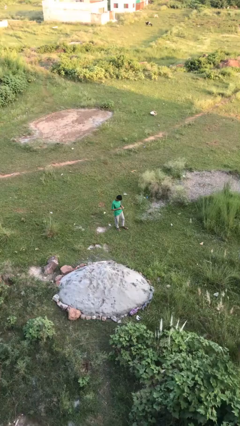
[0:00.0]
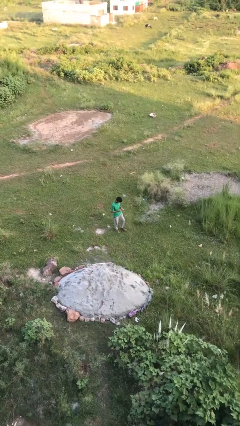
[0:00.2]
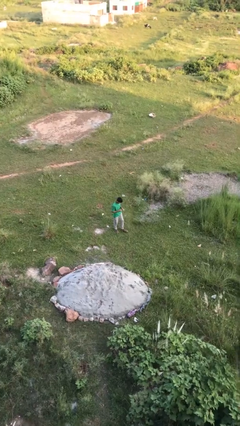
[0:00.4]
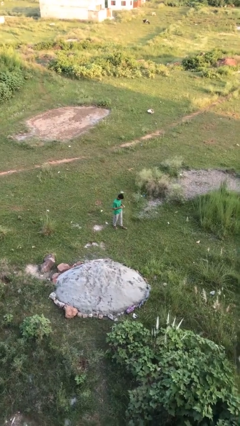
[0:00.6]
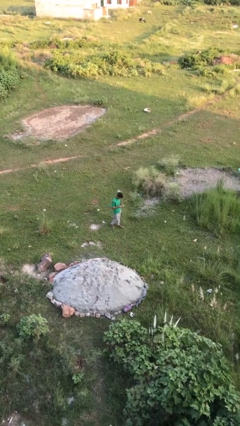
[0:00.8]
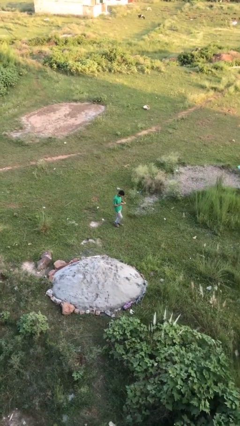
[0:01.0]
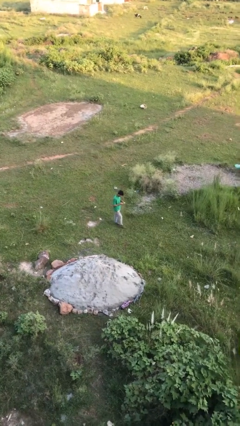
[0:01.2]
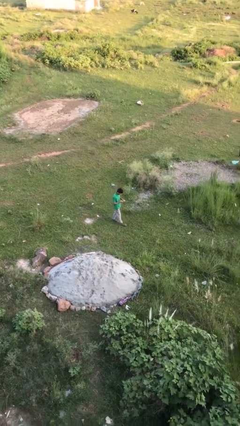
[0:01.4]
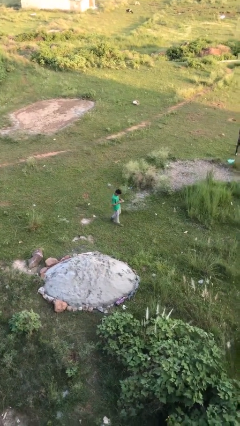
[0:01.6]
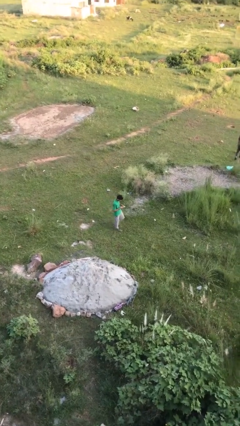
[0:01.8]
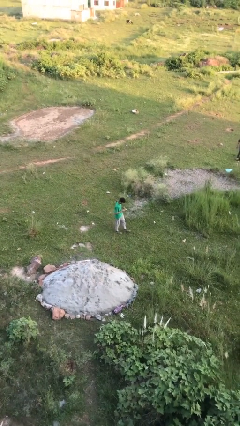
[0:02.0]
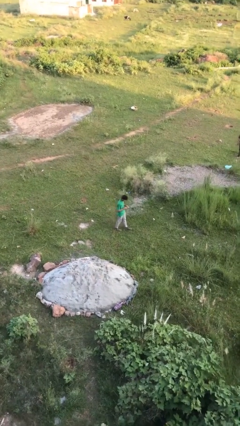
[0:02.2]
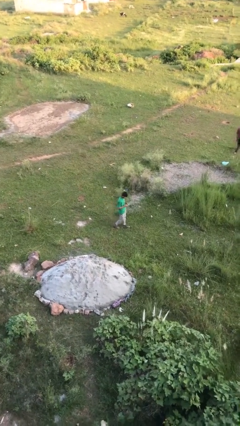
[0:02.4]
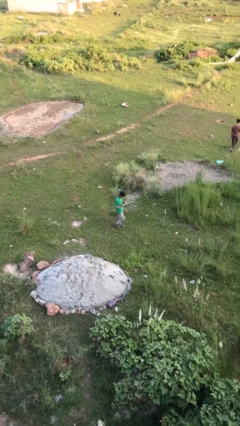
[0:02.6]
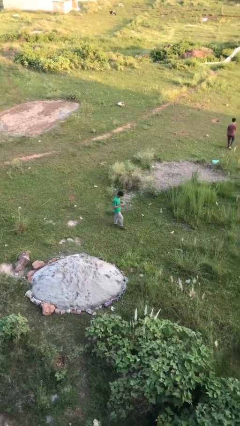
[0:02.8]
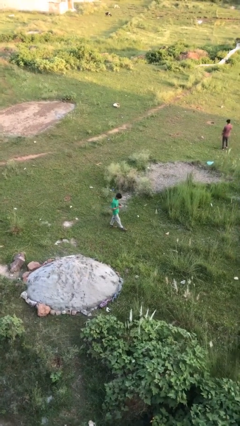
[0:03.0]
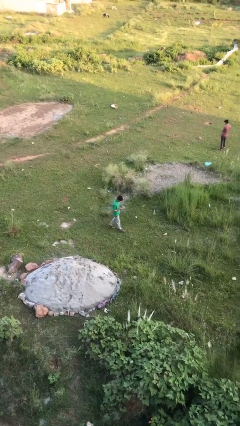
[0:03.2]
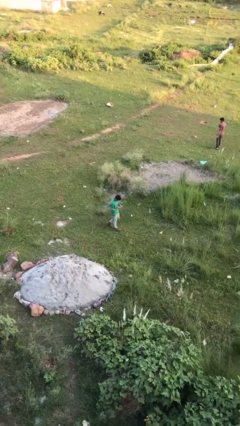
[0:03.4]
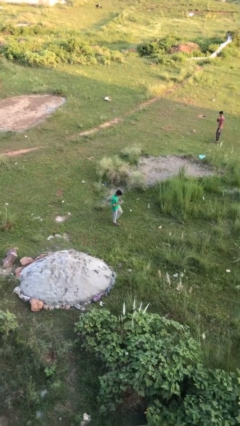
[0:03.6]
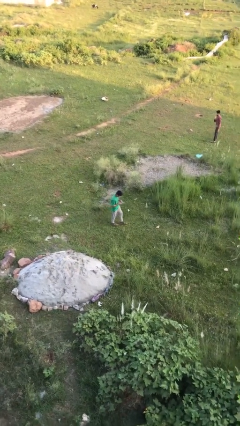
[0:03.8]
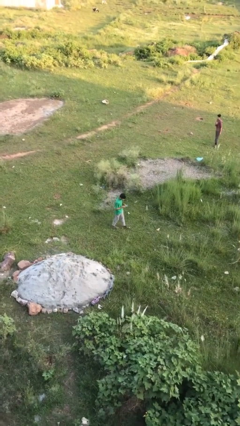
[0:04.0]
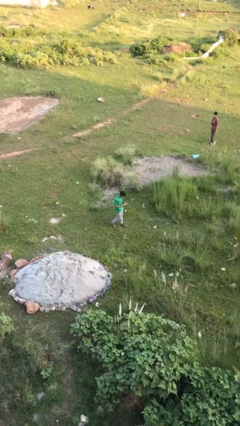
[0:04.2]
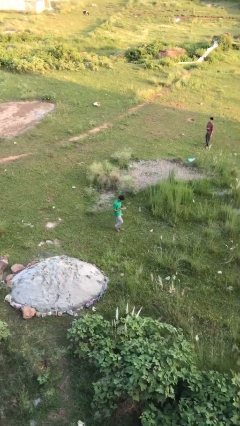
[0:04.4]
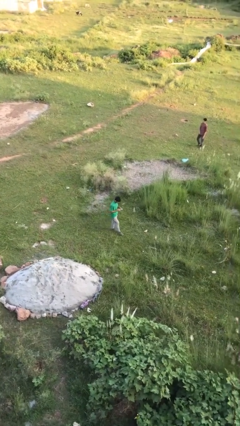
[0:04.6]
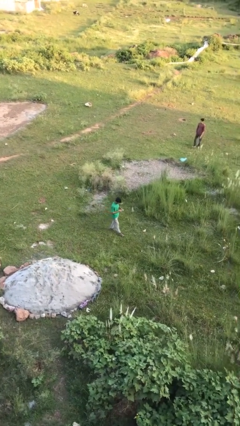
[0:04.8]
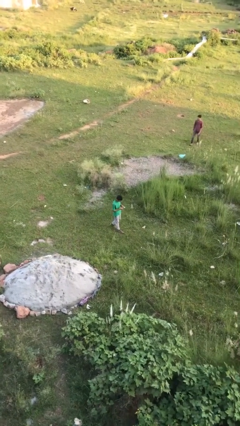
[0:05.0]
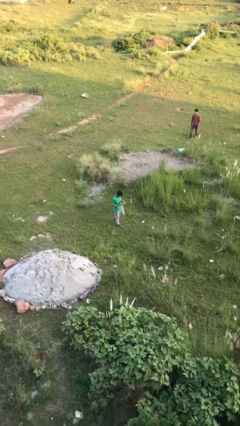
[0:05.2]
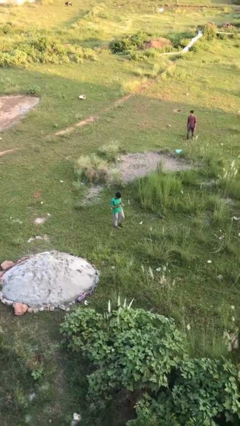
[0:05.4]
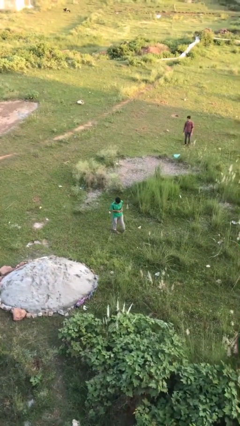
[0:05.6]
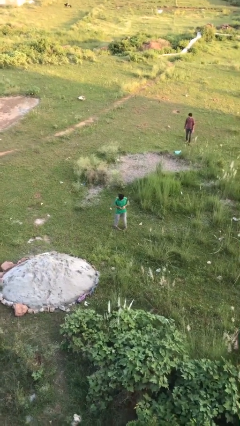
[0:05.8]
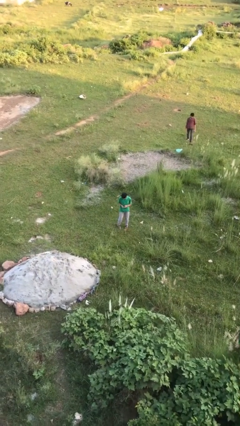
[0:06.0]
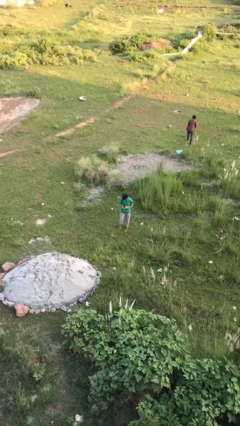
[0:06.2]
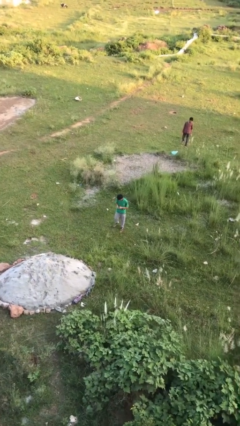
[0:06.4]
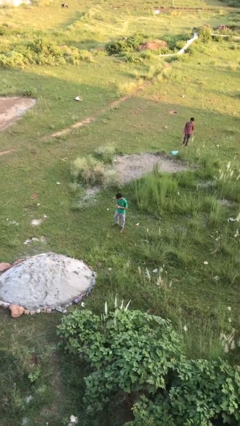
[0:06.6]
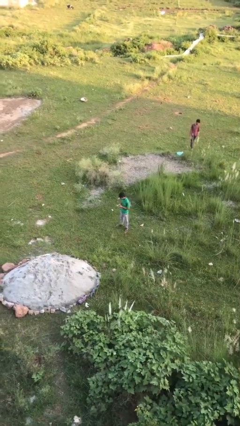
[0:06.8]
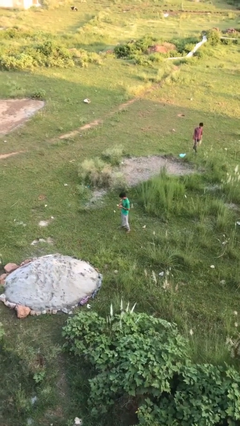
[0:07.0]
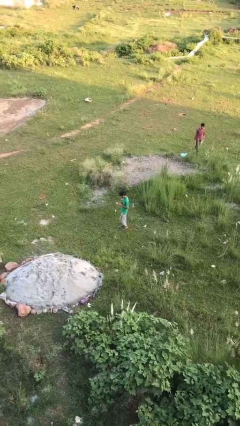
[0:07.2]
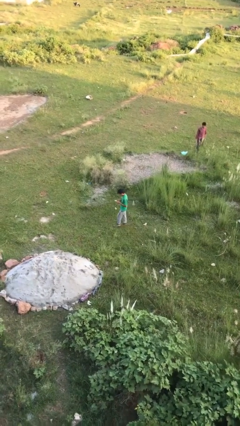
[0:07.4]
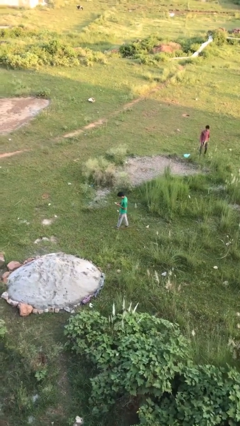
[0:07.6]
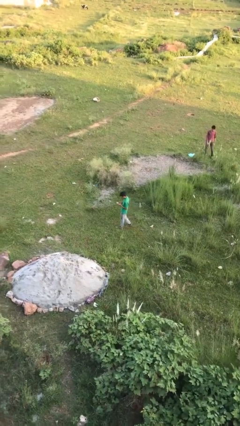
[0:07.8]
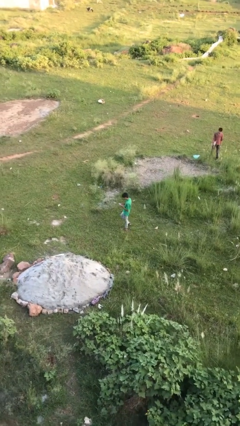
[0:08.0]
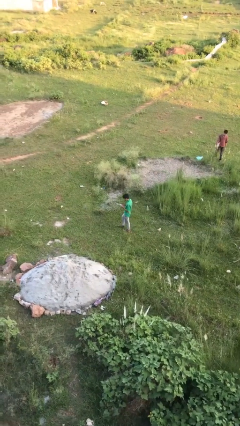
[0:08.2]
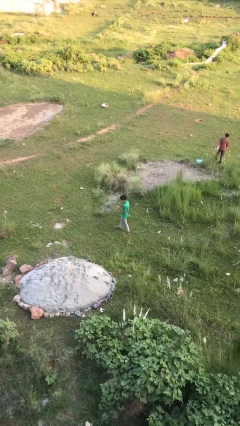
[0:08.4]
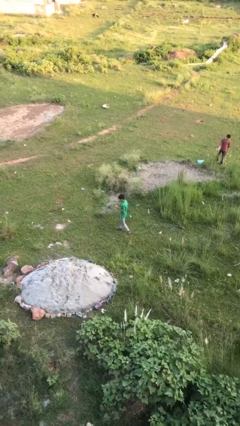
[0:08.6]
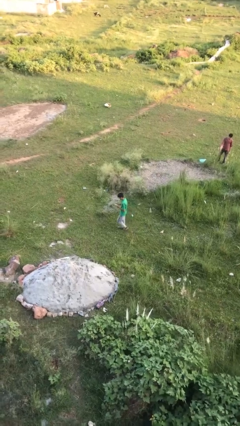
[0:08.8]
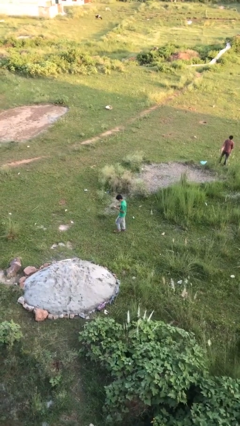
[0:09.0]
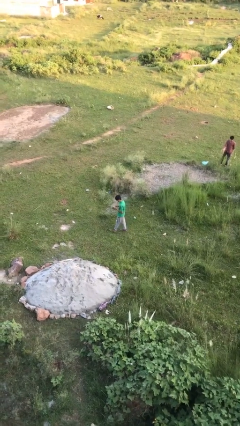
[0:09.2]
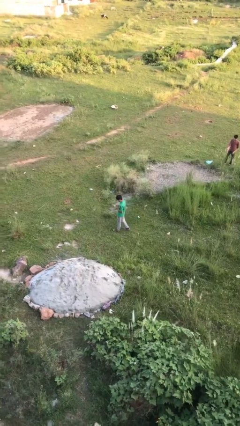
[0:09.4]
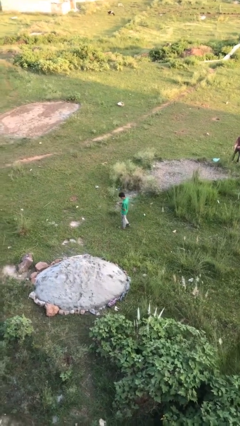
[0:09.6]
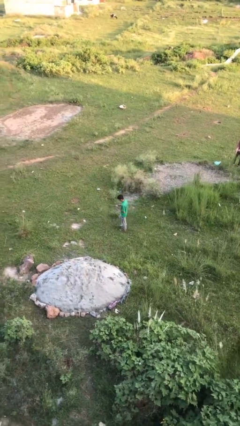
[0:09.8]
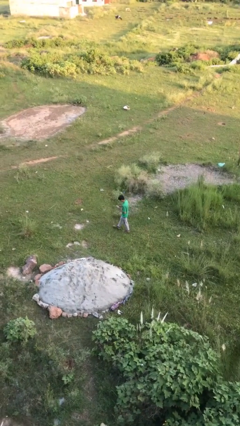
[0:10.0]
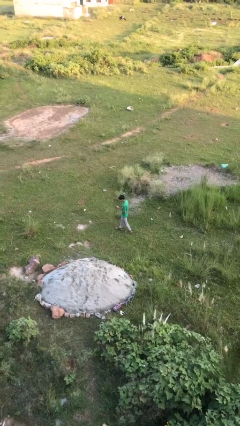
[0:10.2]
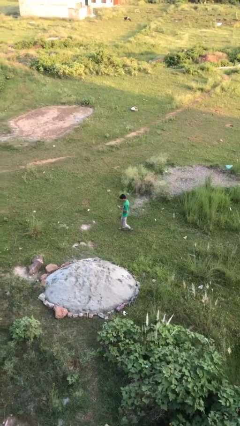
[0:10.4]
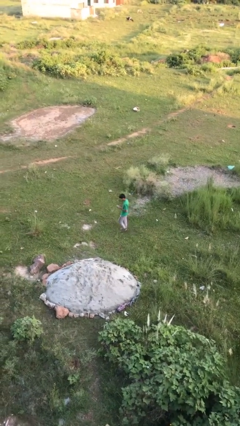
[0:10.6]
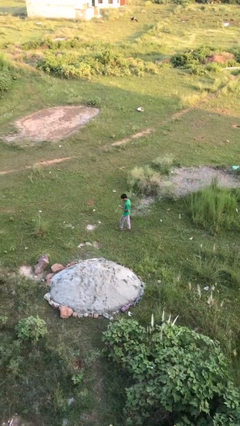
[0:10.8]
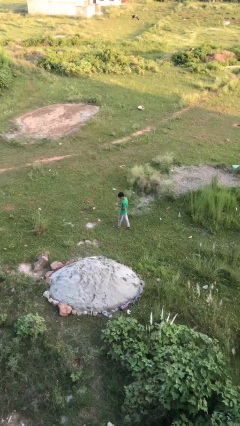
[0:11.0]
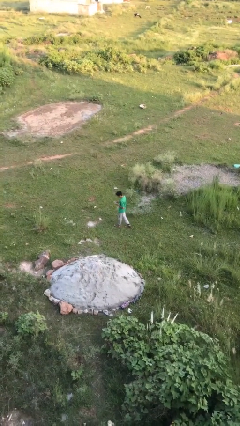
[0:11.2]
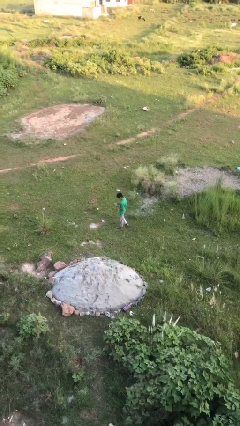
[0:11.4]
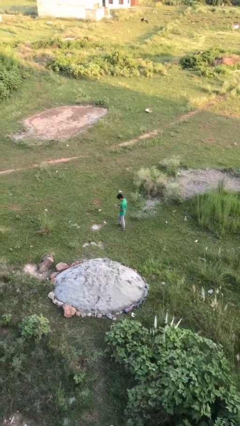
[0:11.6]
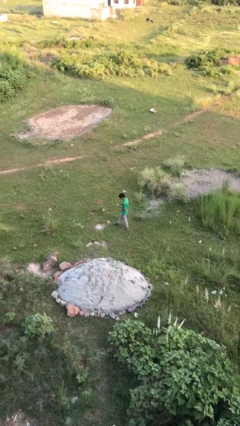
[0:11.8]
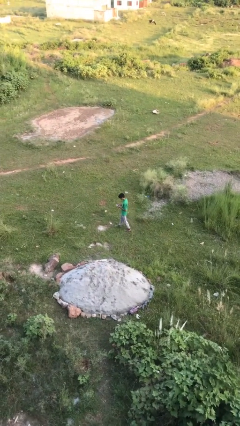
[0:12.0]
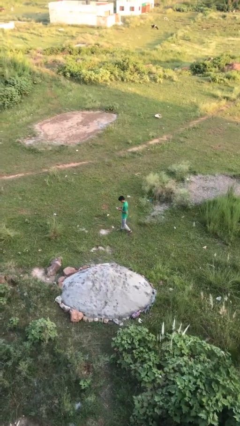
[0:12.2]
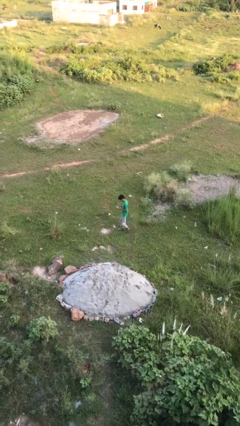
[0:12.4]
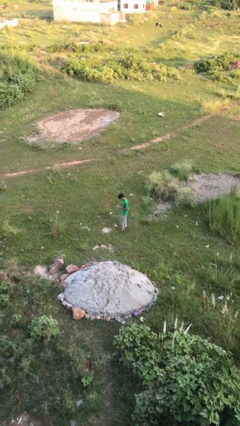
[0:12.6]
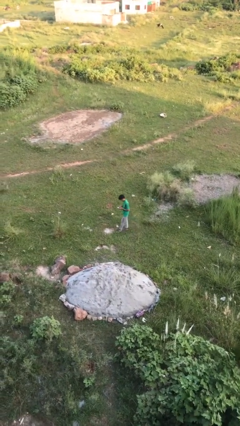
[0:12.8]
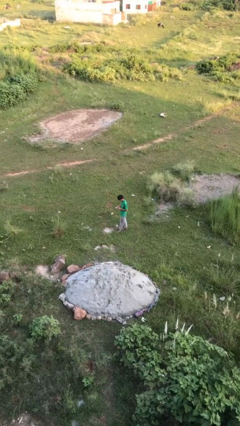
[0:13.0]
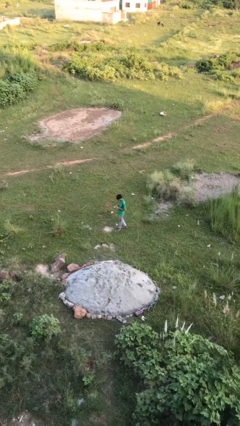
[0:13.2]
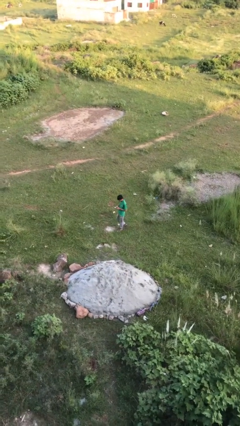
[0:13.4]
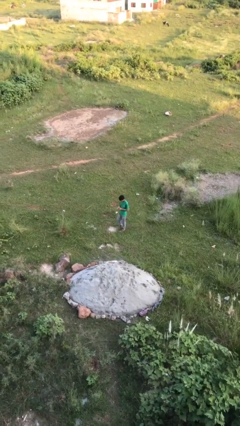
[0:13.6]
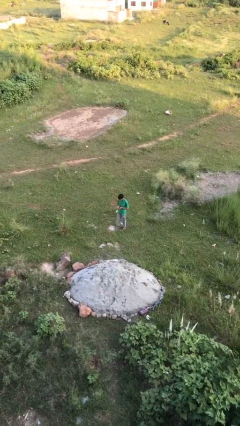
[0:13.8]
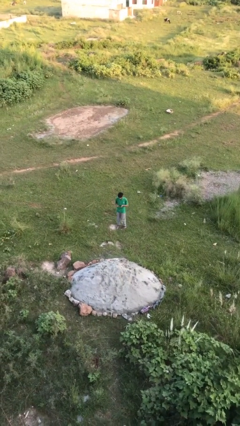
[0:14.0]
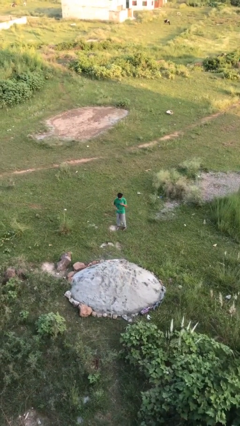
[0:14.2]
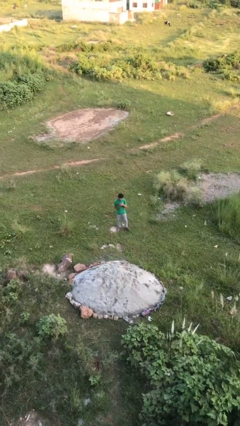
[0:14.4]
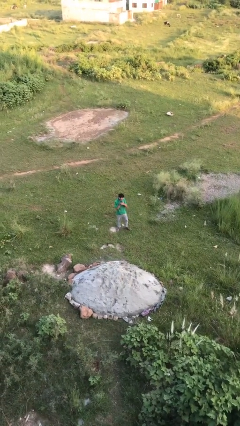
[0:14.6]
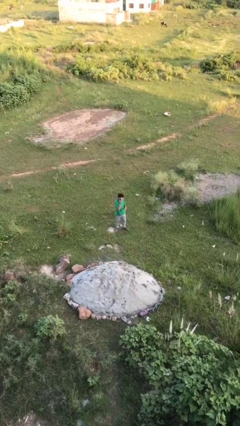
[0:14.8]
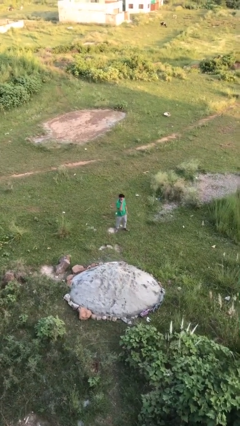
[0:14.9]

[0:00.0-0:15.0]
person texts on phone

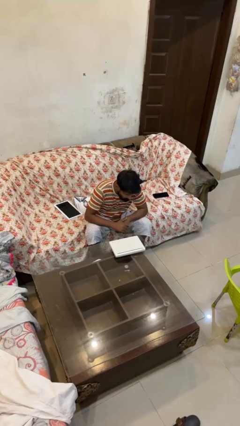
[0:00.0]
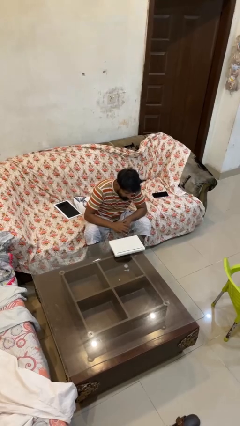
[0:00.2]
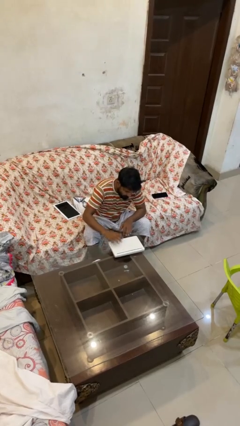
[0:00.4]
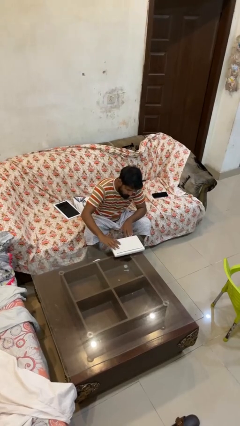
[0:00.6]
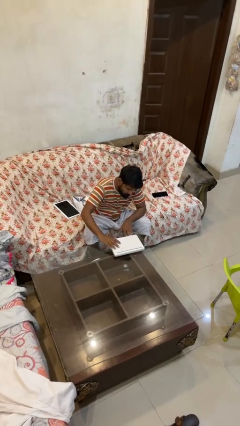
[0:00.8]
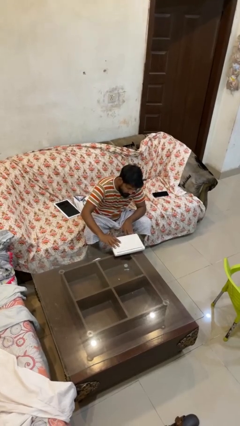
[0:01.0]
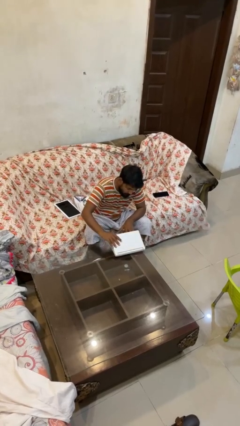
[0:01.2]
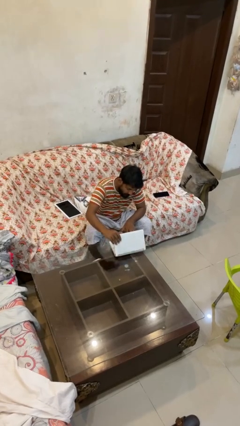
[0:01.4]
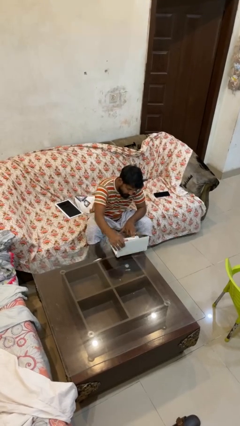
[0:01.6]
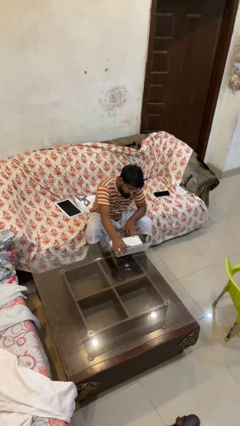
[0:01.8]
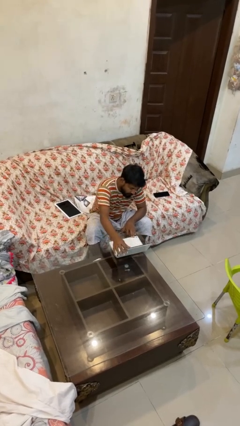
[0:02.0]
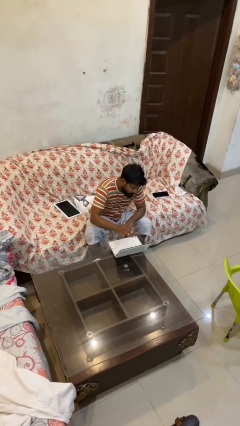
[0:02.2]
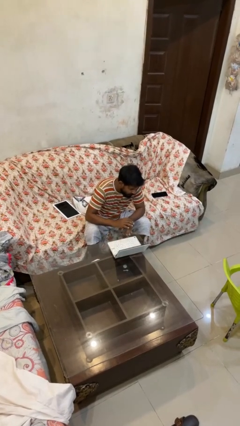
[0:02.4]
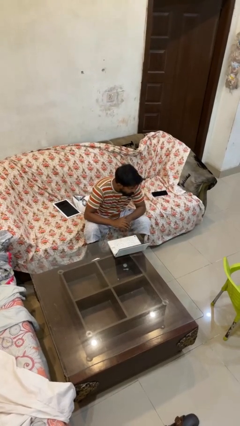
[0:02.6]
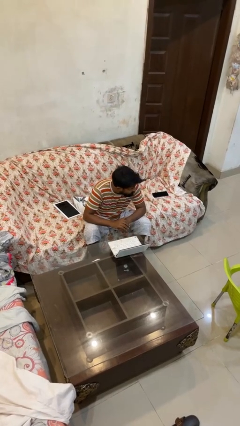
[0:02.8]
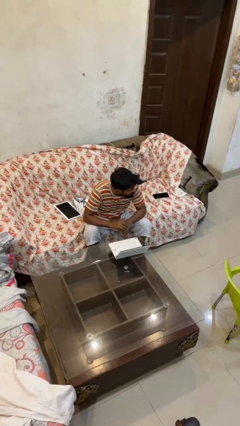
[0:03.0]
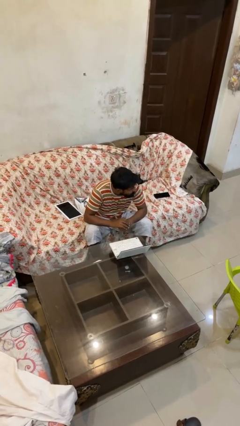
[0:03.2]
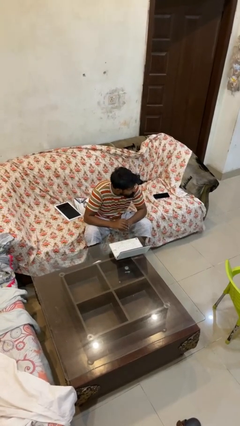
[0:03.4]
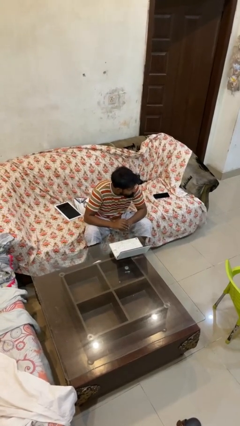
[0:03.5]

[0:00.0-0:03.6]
person opens laptop
